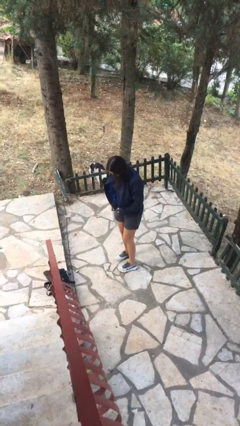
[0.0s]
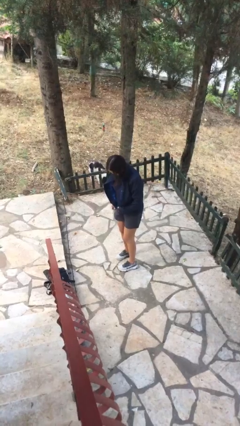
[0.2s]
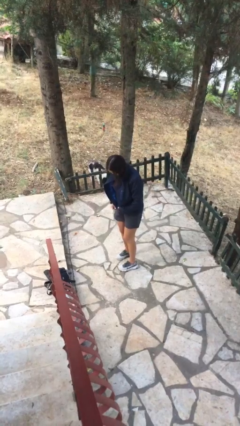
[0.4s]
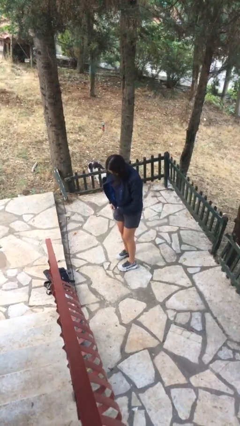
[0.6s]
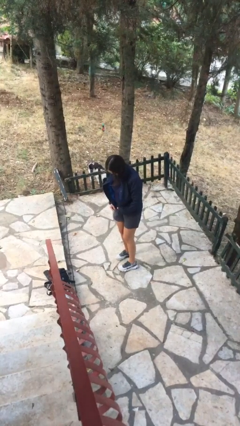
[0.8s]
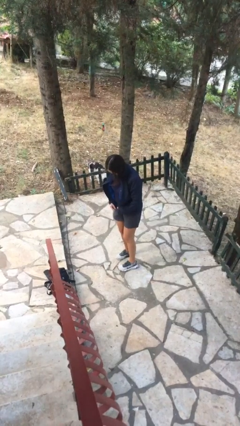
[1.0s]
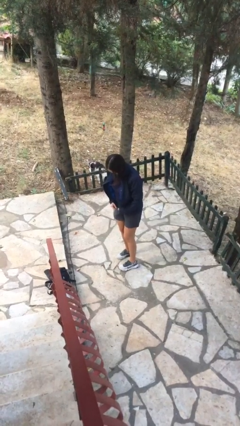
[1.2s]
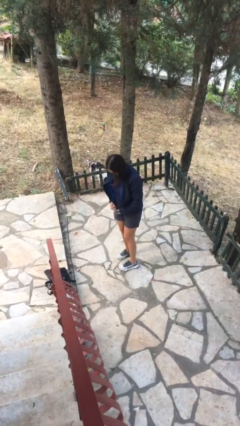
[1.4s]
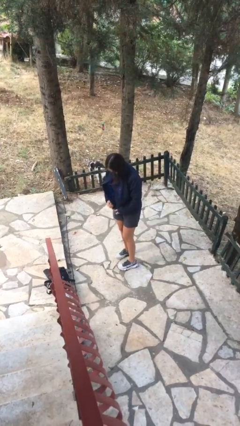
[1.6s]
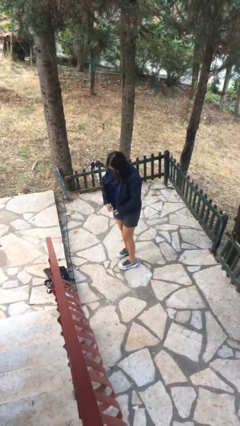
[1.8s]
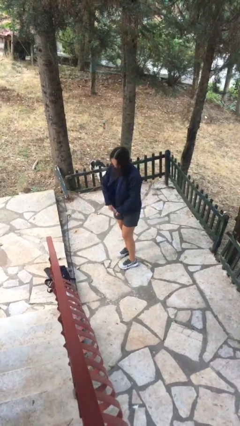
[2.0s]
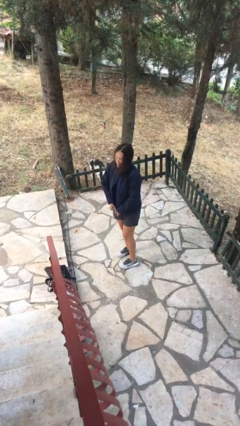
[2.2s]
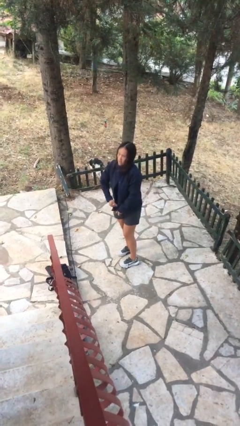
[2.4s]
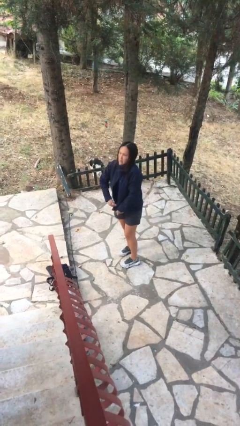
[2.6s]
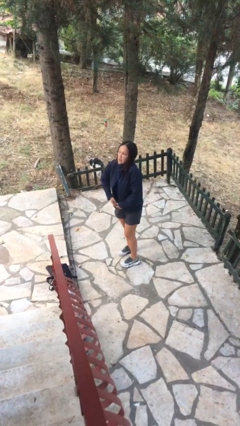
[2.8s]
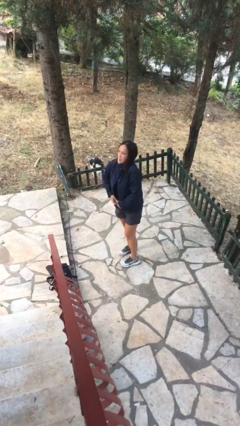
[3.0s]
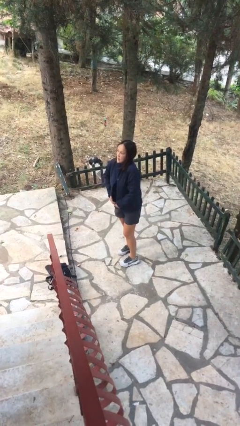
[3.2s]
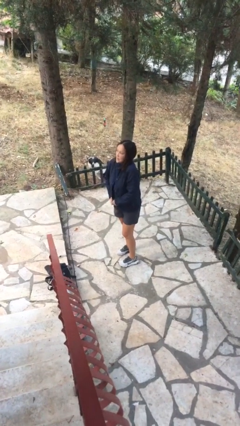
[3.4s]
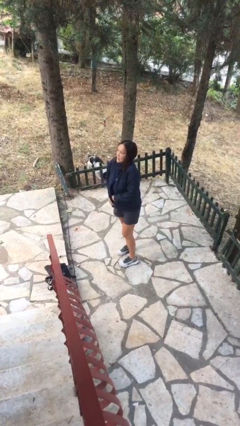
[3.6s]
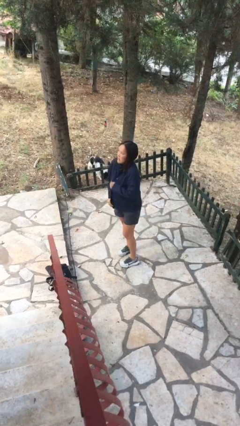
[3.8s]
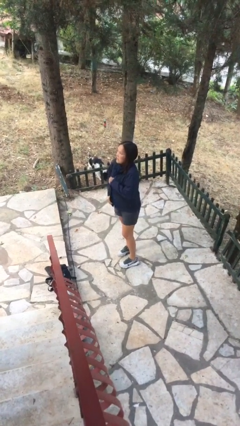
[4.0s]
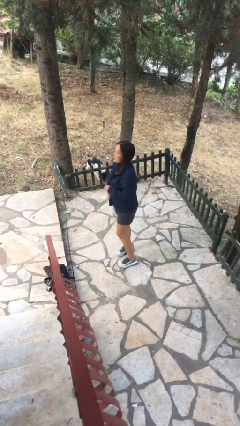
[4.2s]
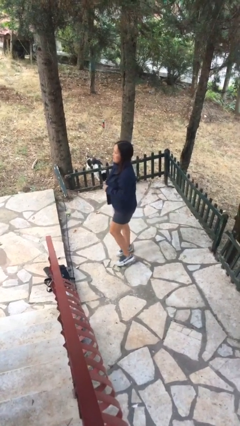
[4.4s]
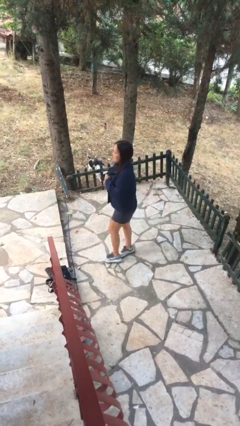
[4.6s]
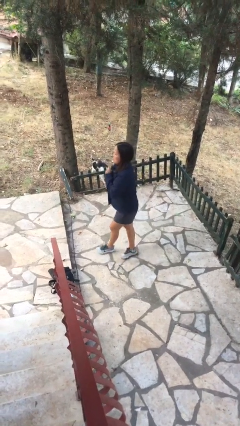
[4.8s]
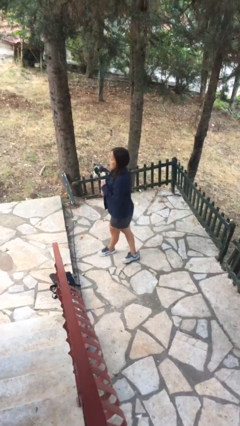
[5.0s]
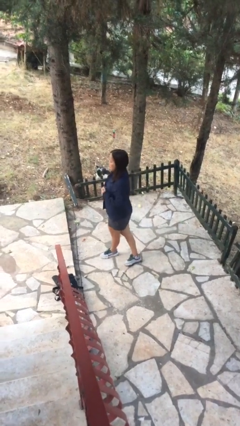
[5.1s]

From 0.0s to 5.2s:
person zips up jacket

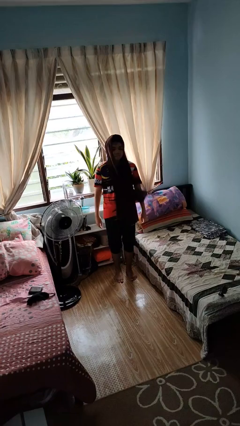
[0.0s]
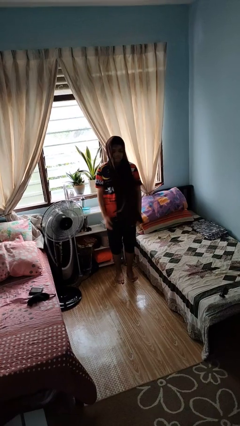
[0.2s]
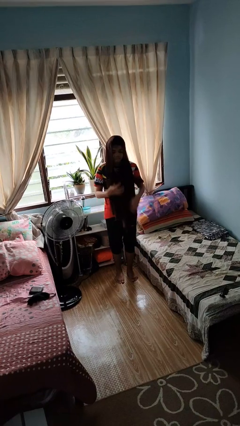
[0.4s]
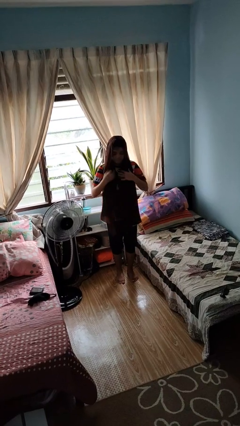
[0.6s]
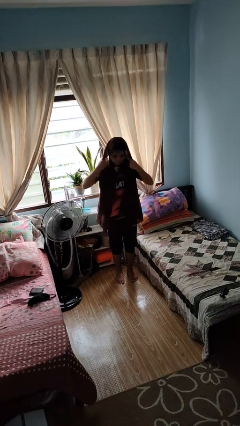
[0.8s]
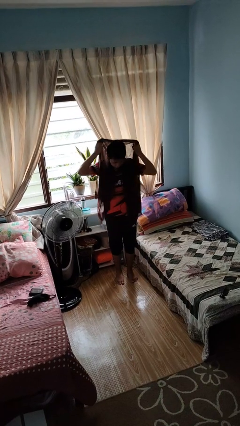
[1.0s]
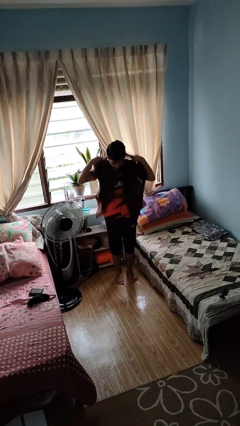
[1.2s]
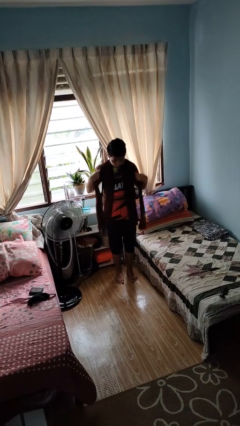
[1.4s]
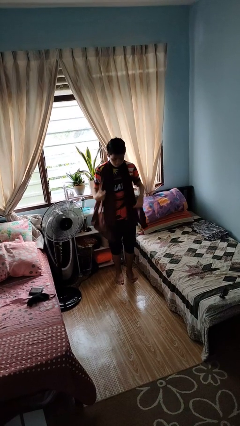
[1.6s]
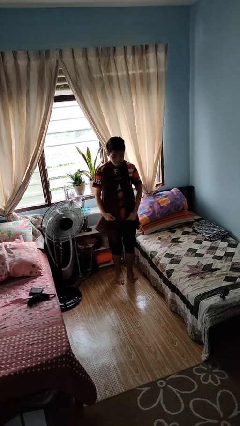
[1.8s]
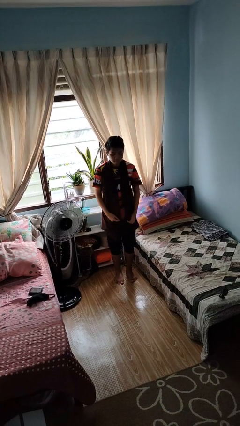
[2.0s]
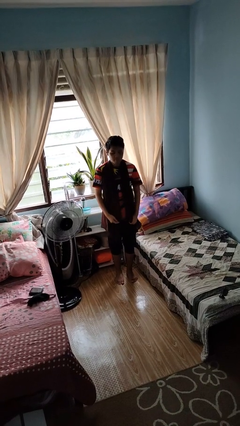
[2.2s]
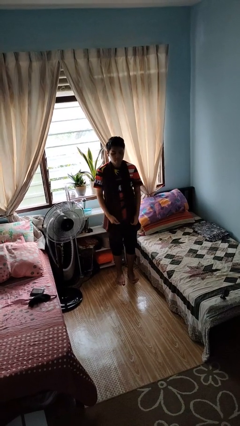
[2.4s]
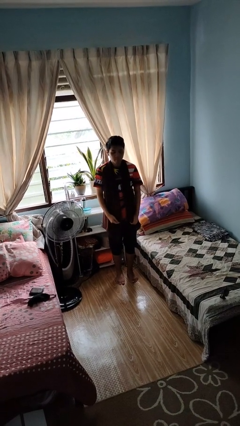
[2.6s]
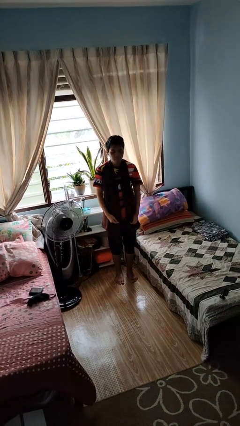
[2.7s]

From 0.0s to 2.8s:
person takes off scarf

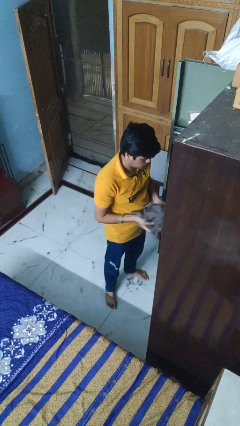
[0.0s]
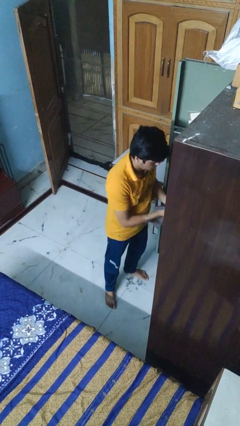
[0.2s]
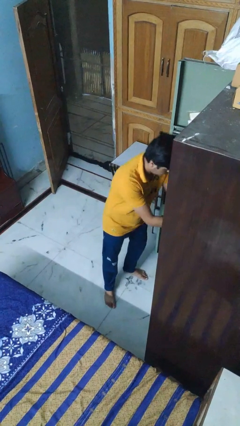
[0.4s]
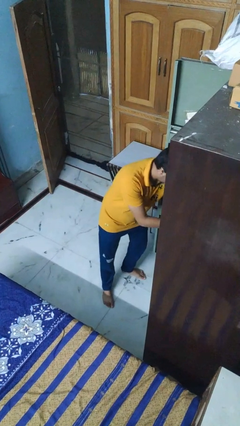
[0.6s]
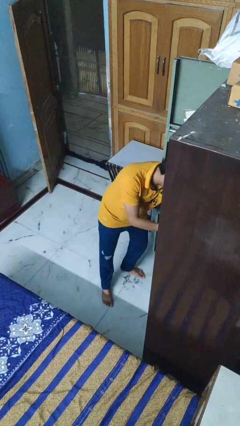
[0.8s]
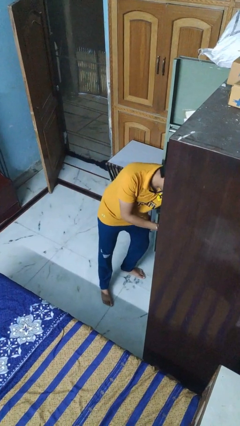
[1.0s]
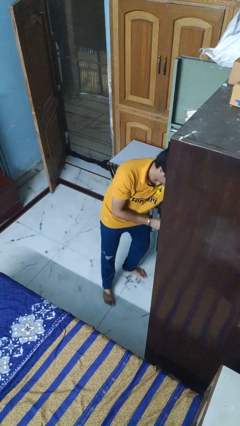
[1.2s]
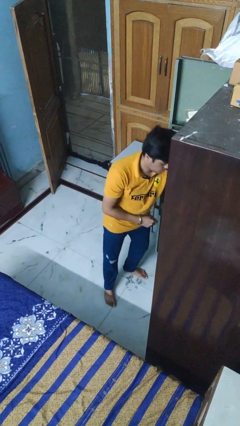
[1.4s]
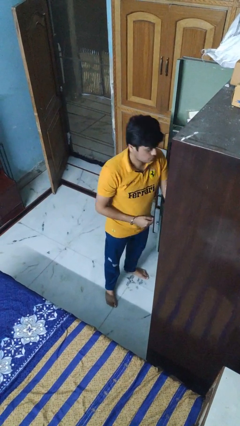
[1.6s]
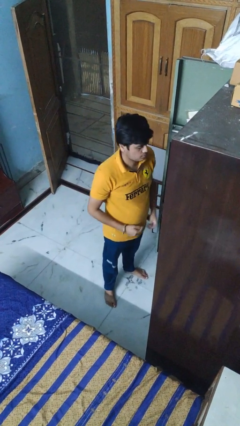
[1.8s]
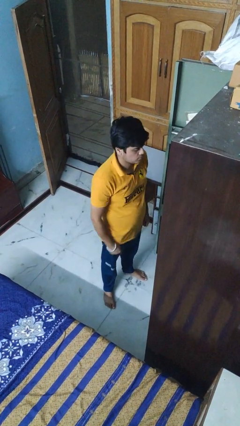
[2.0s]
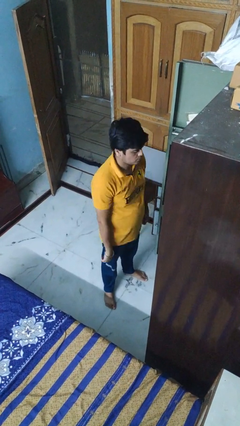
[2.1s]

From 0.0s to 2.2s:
person puts clothes into dresser

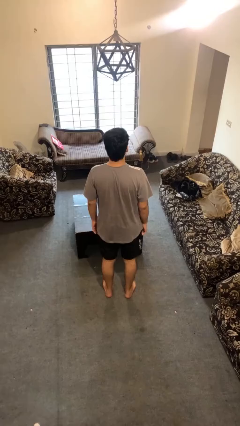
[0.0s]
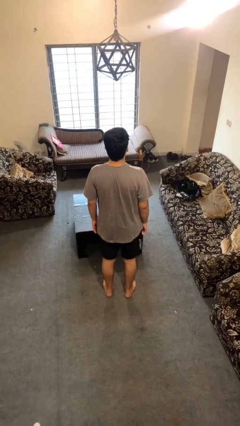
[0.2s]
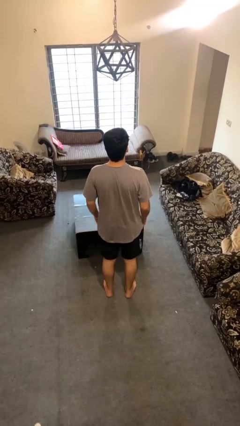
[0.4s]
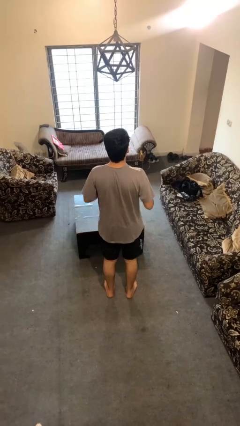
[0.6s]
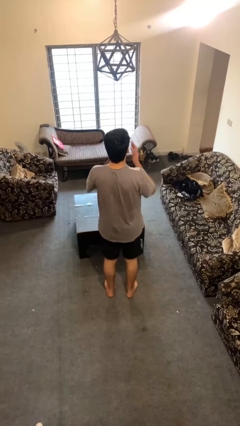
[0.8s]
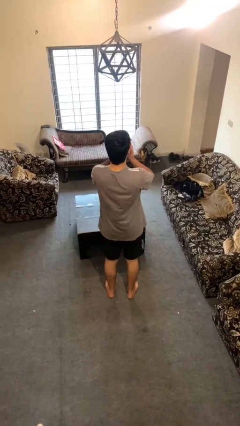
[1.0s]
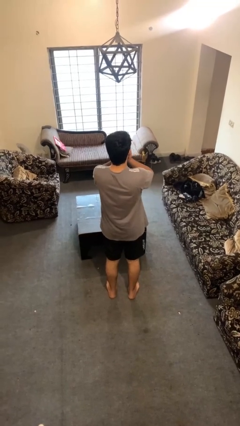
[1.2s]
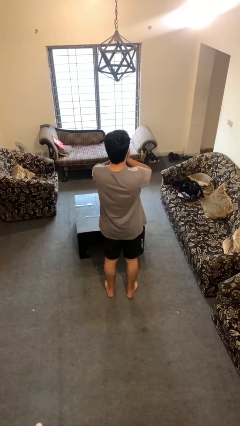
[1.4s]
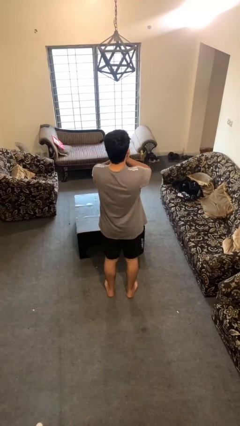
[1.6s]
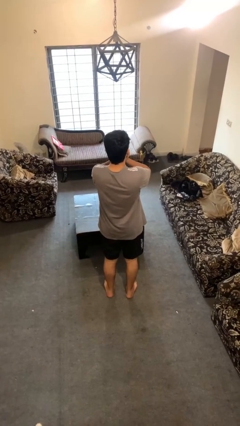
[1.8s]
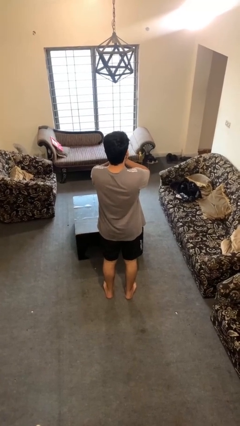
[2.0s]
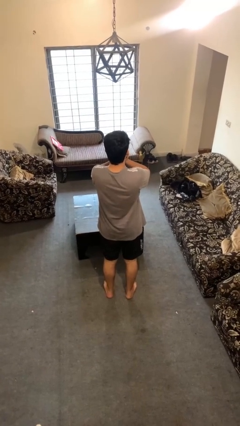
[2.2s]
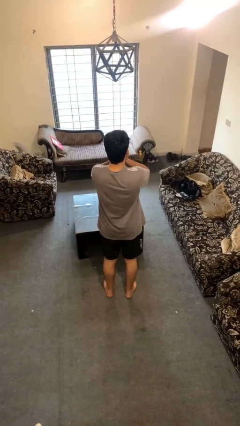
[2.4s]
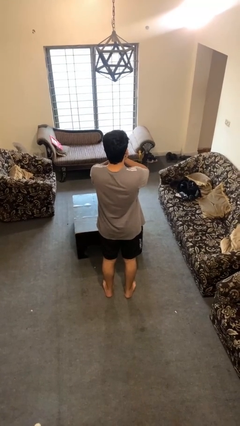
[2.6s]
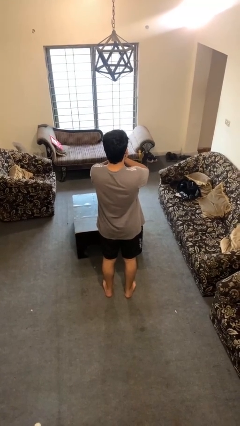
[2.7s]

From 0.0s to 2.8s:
person covers face with hands

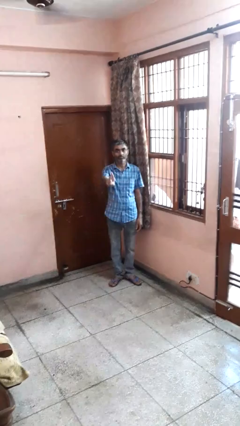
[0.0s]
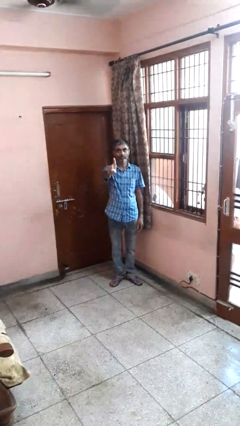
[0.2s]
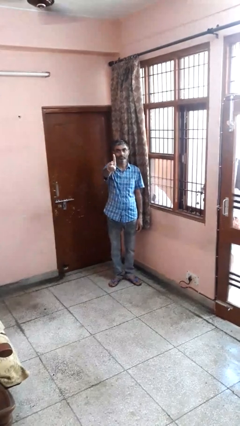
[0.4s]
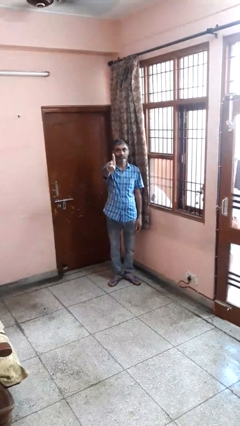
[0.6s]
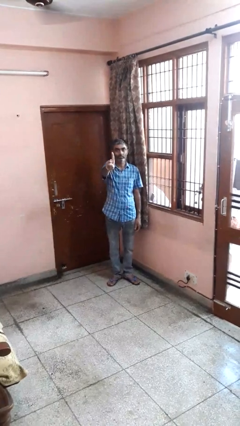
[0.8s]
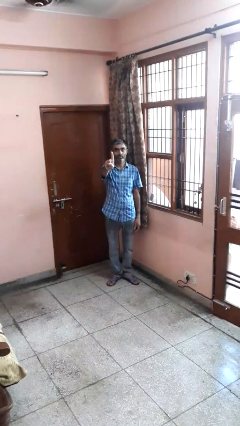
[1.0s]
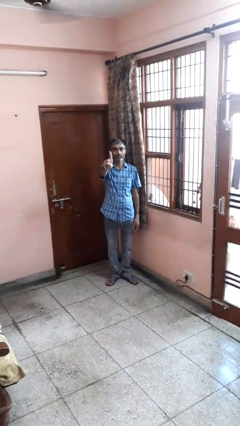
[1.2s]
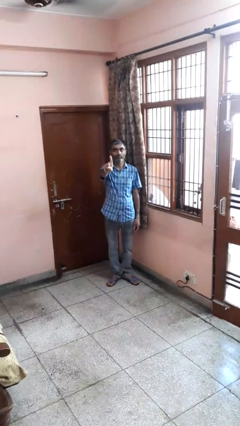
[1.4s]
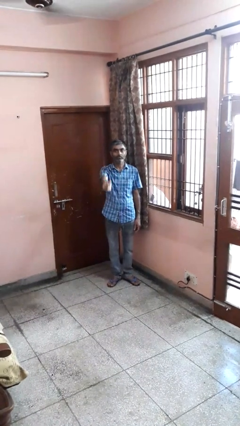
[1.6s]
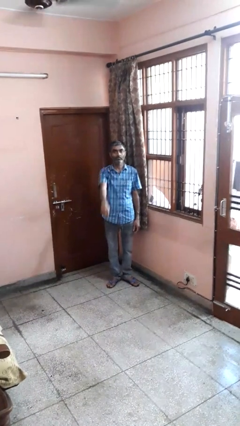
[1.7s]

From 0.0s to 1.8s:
person gestures number one

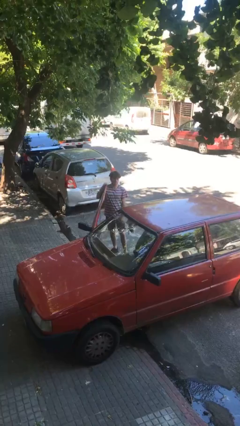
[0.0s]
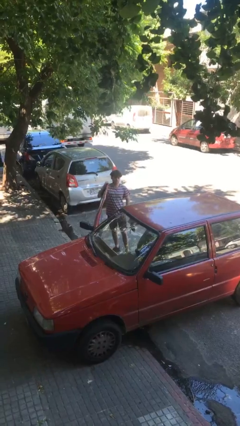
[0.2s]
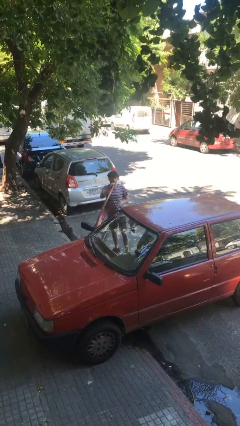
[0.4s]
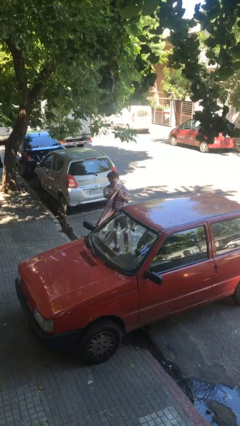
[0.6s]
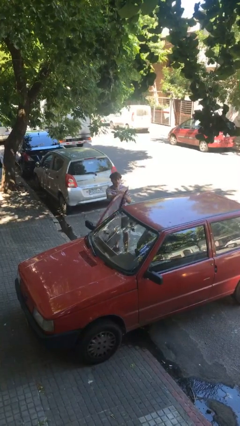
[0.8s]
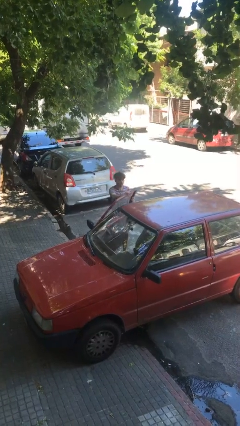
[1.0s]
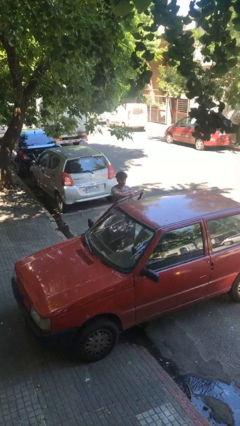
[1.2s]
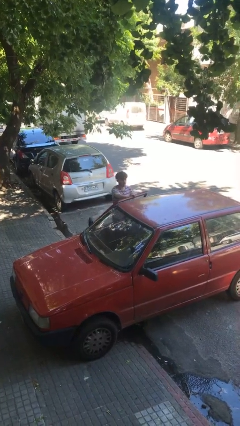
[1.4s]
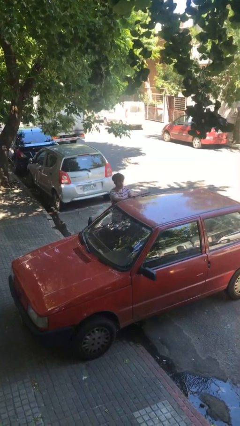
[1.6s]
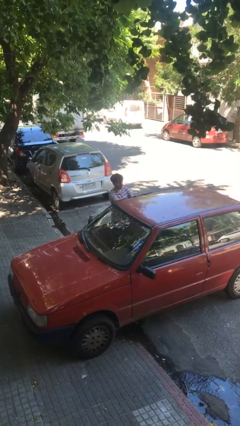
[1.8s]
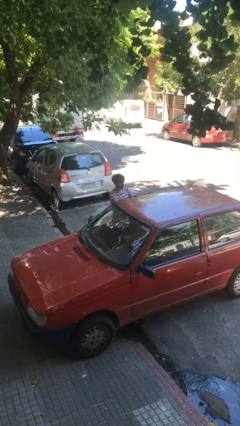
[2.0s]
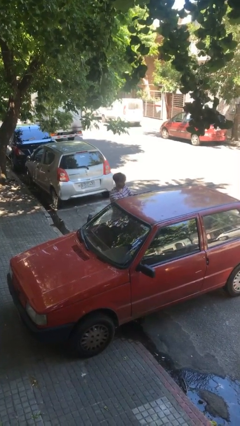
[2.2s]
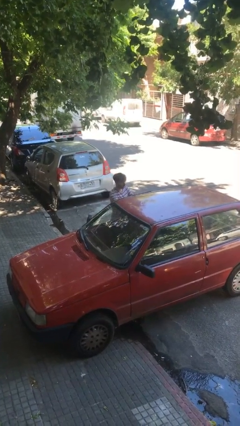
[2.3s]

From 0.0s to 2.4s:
person closes car door

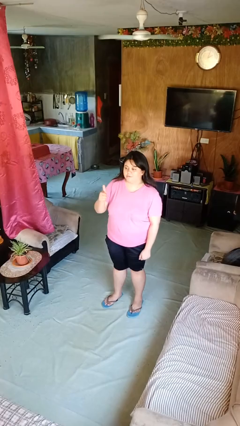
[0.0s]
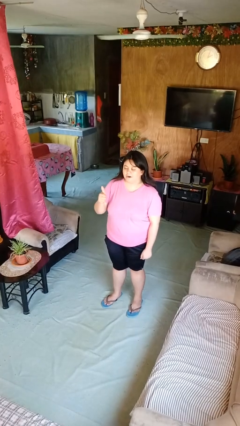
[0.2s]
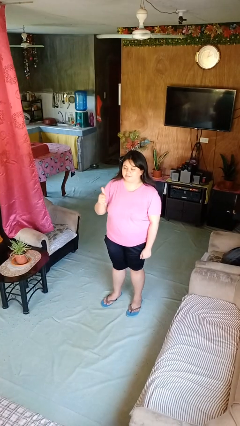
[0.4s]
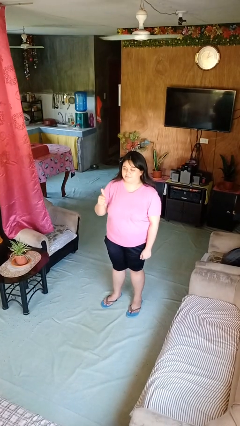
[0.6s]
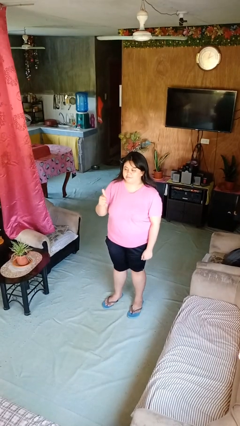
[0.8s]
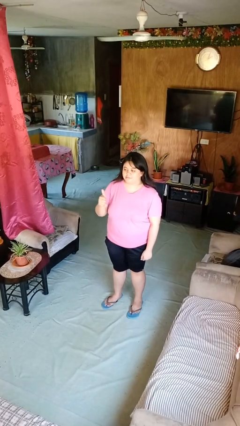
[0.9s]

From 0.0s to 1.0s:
person gestures thumbs up
